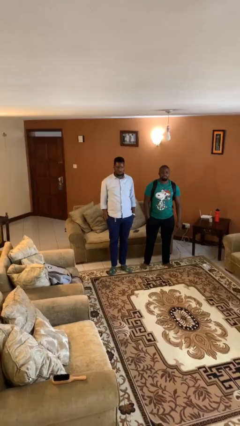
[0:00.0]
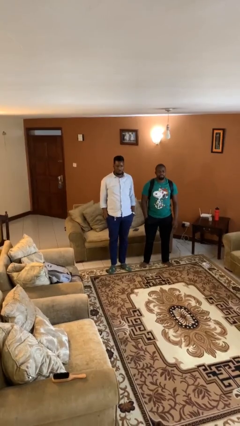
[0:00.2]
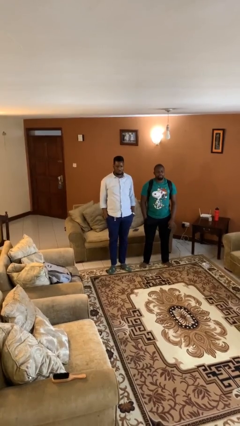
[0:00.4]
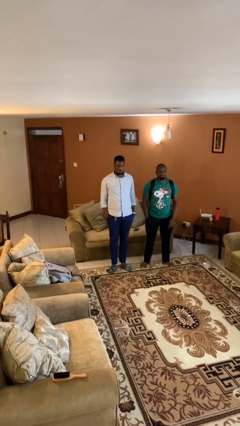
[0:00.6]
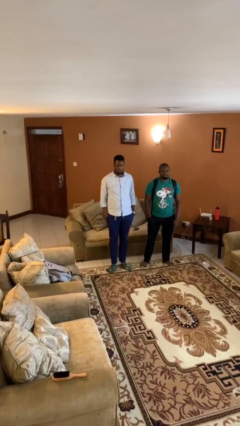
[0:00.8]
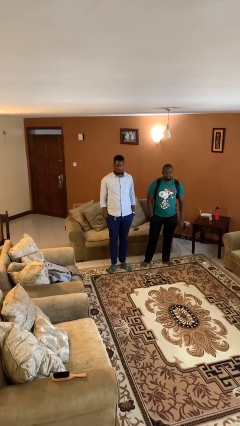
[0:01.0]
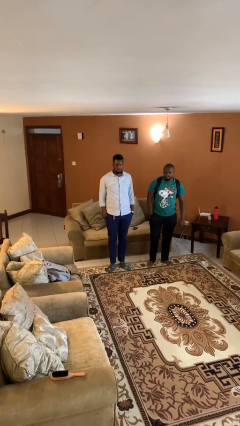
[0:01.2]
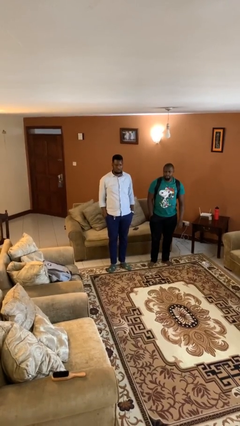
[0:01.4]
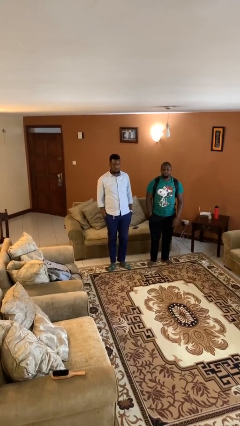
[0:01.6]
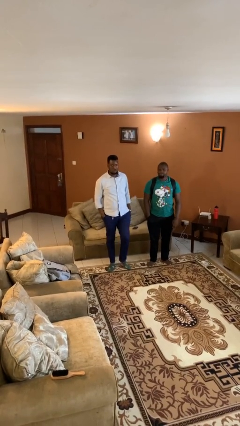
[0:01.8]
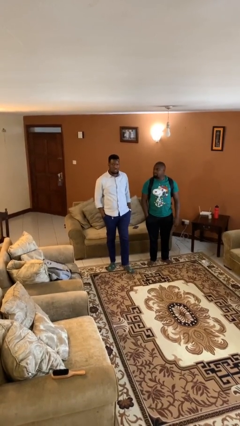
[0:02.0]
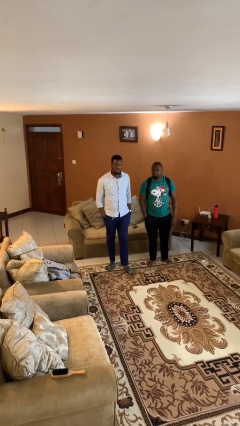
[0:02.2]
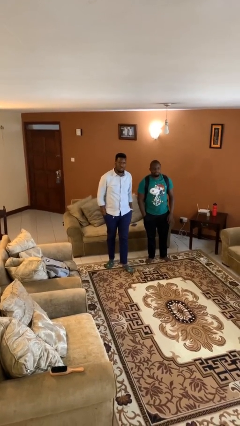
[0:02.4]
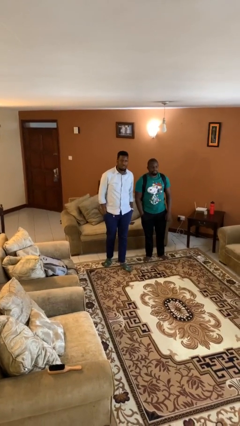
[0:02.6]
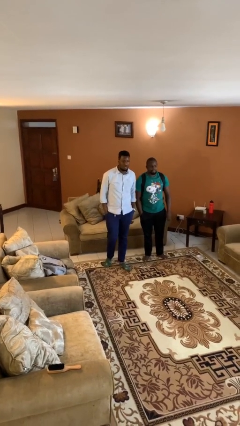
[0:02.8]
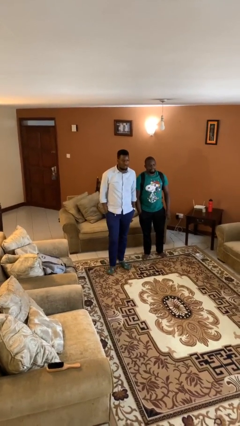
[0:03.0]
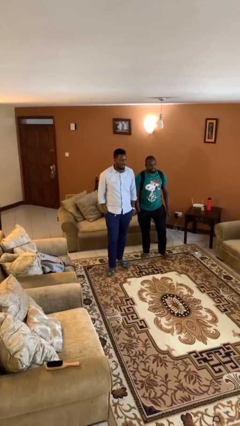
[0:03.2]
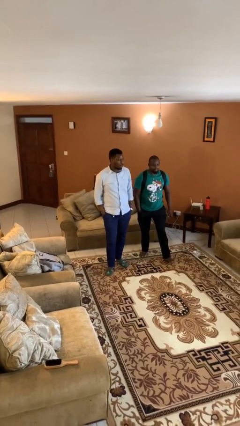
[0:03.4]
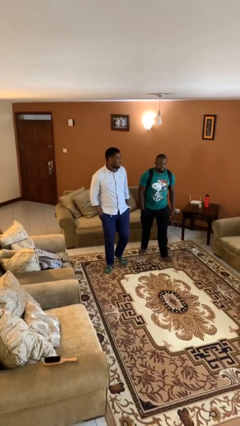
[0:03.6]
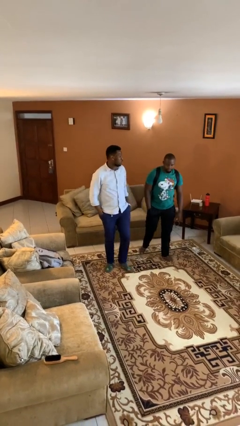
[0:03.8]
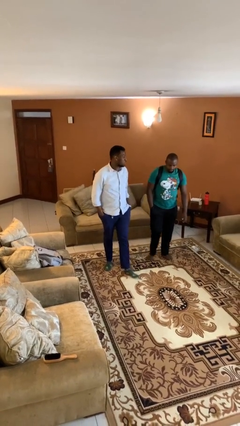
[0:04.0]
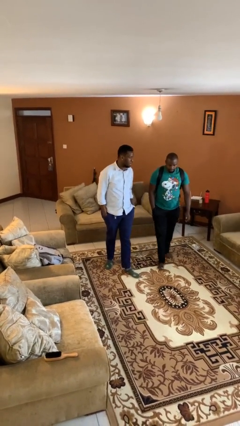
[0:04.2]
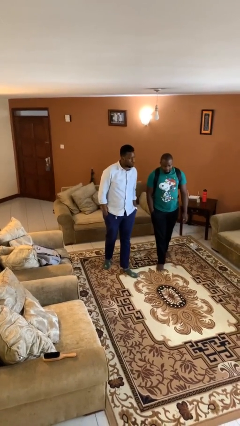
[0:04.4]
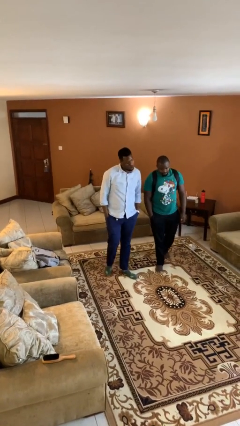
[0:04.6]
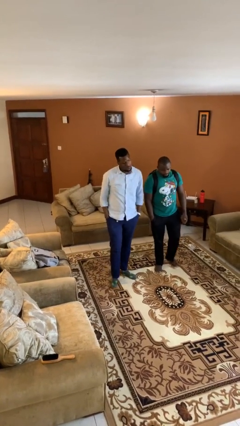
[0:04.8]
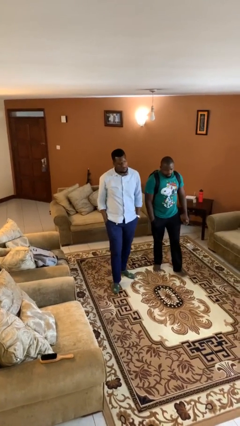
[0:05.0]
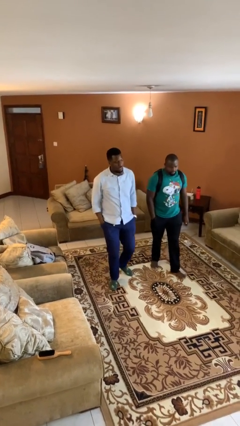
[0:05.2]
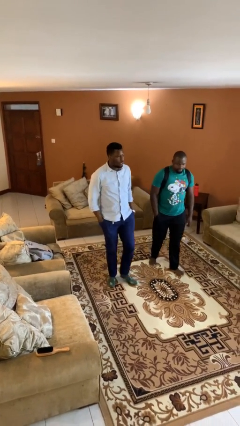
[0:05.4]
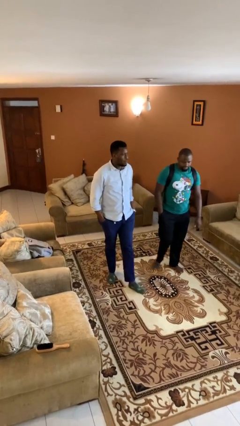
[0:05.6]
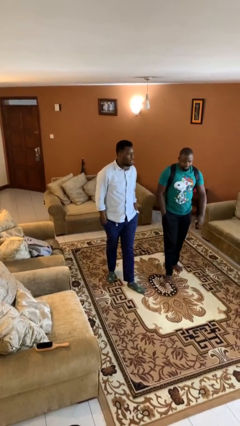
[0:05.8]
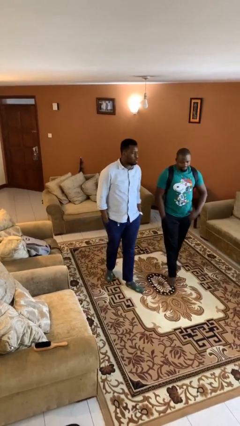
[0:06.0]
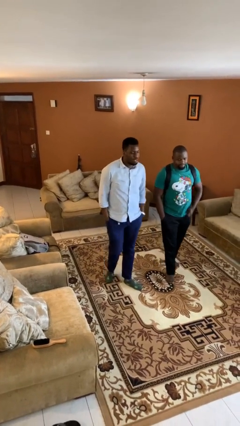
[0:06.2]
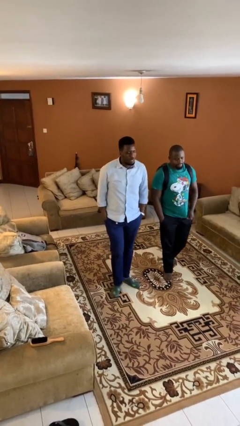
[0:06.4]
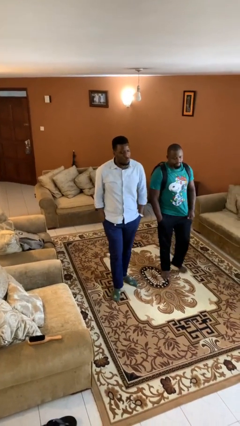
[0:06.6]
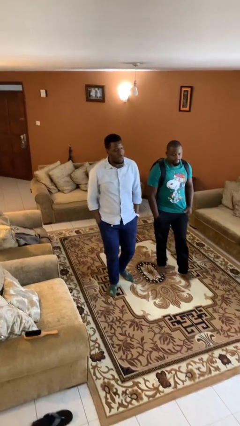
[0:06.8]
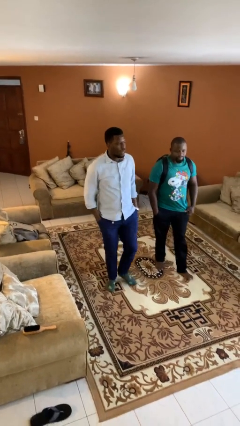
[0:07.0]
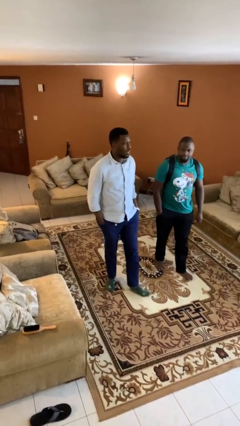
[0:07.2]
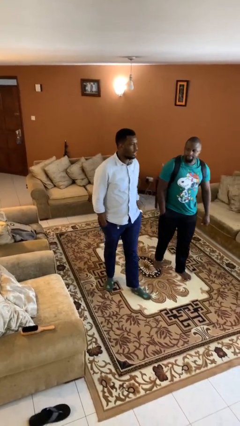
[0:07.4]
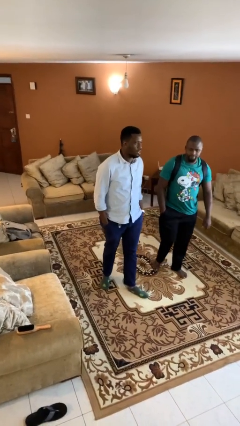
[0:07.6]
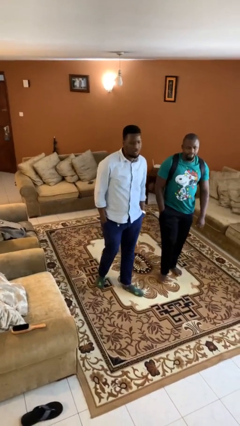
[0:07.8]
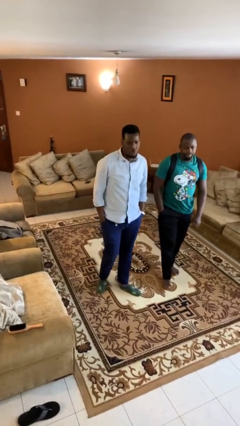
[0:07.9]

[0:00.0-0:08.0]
person talks to person

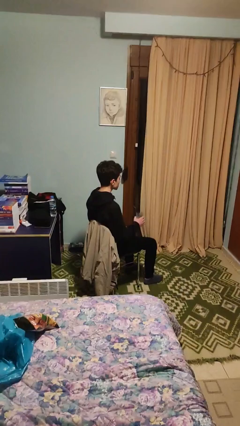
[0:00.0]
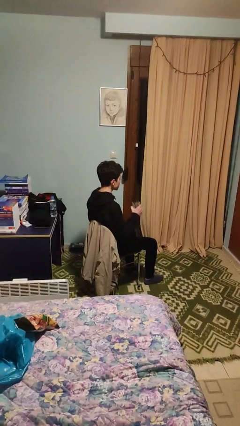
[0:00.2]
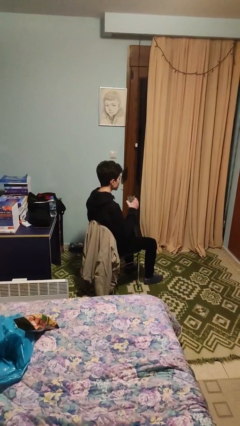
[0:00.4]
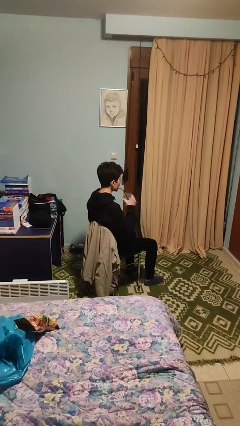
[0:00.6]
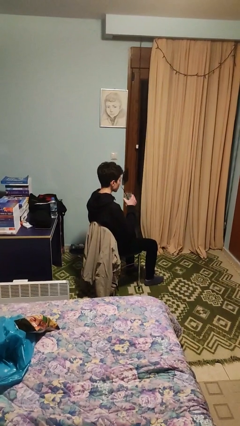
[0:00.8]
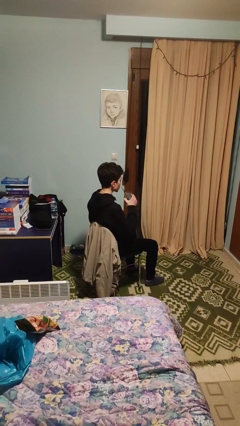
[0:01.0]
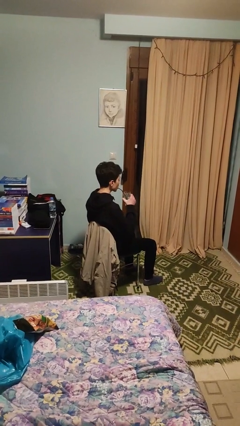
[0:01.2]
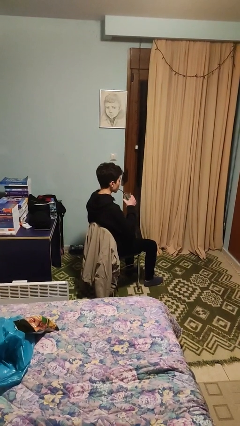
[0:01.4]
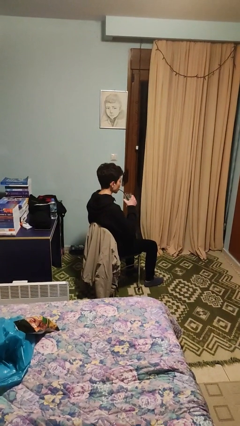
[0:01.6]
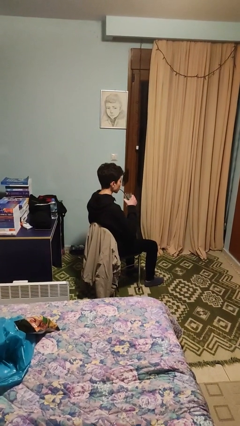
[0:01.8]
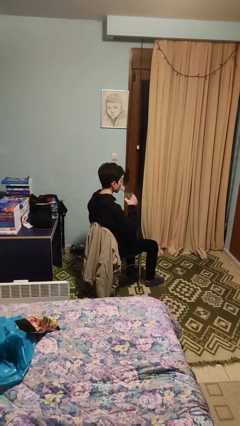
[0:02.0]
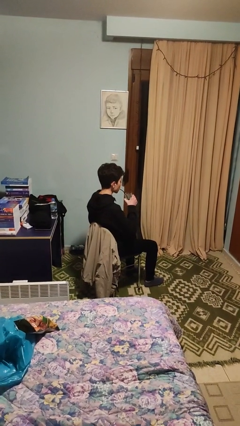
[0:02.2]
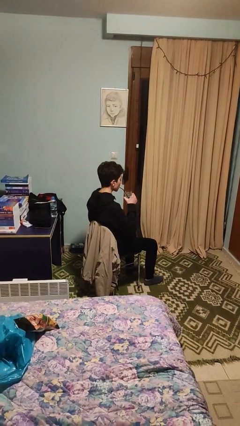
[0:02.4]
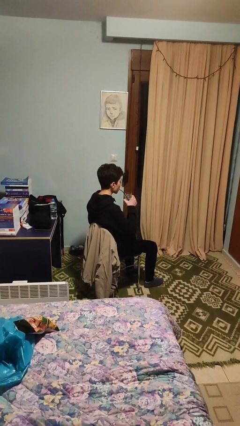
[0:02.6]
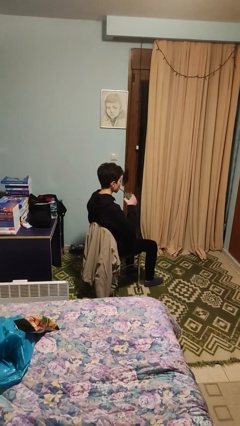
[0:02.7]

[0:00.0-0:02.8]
person drinks from straw

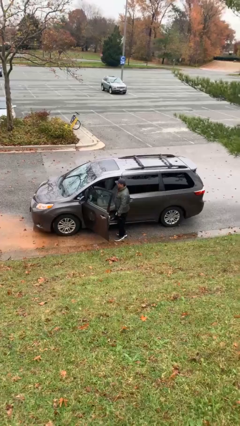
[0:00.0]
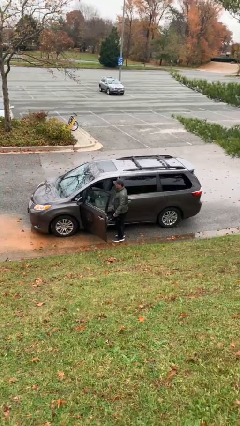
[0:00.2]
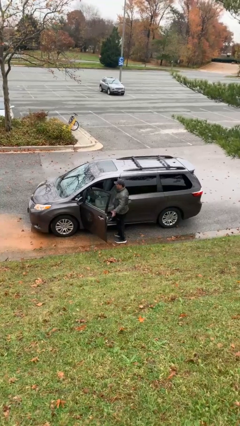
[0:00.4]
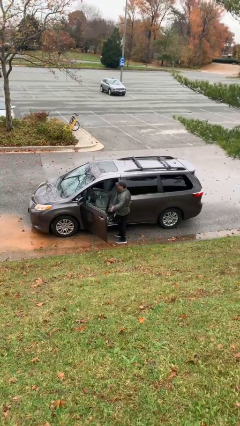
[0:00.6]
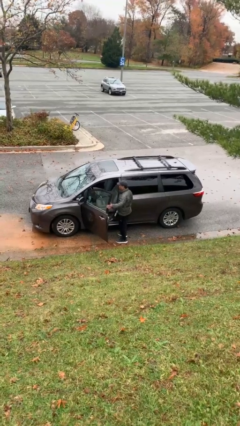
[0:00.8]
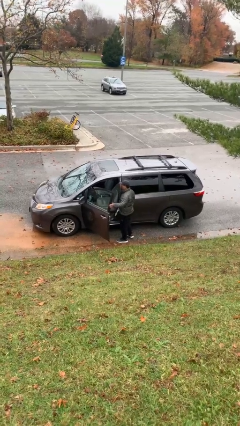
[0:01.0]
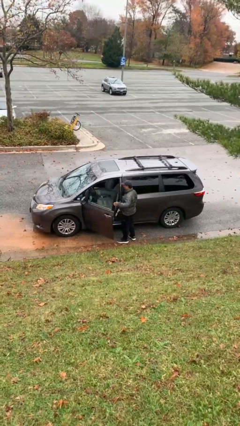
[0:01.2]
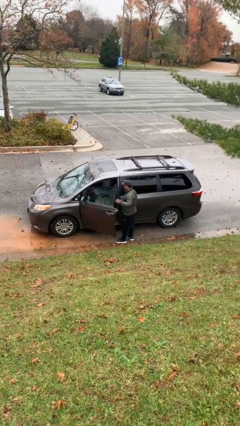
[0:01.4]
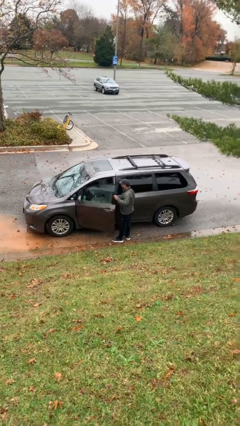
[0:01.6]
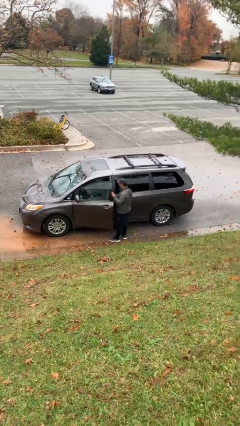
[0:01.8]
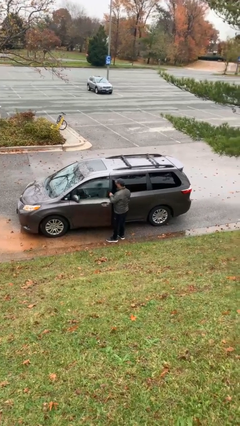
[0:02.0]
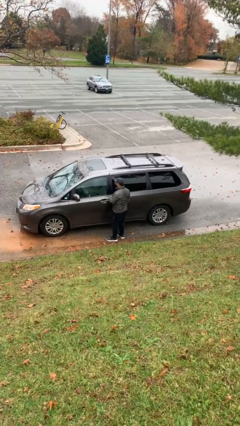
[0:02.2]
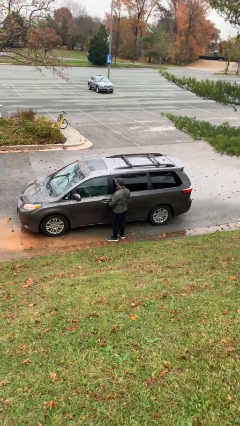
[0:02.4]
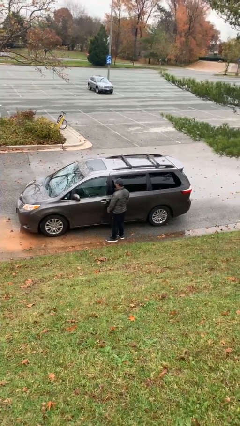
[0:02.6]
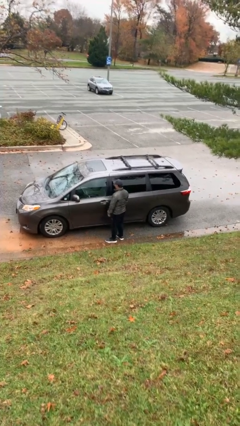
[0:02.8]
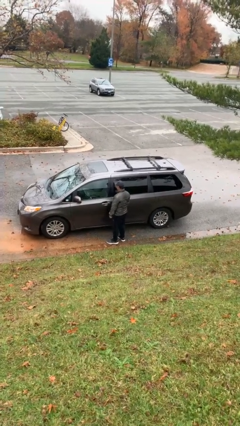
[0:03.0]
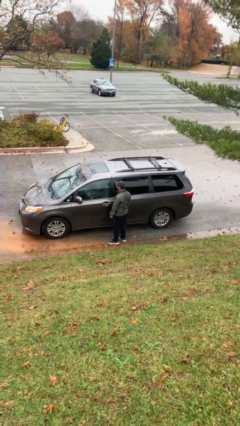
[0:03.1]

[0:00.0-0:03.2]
person closes car door

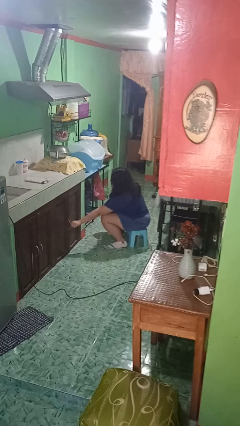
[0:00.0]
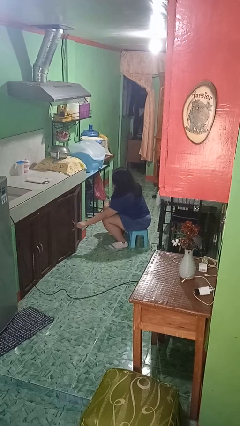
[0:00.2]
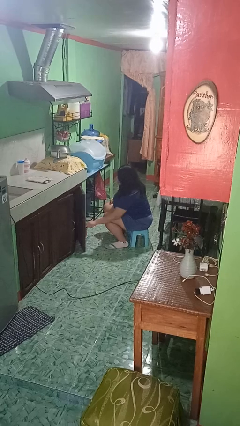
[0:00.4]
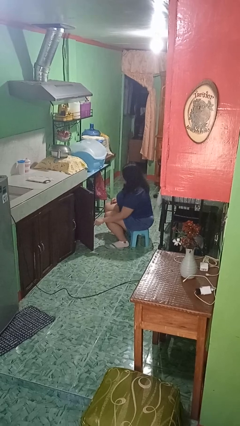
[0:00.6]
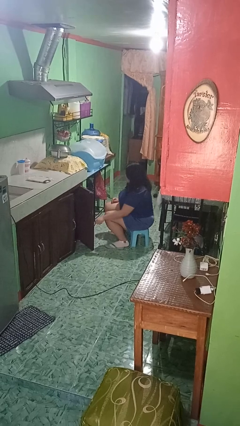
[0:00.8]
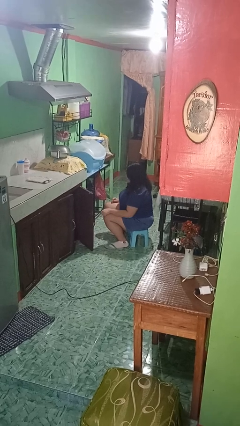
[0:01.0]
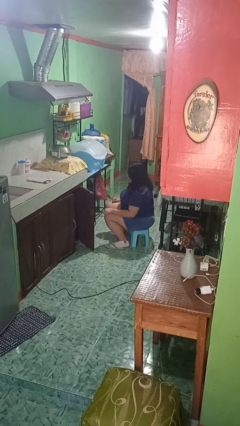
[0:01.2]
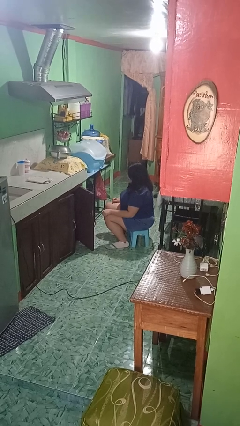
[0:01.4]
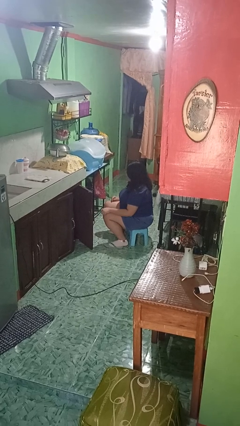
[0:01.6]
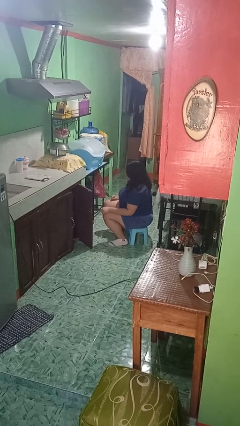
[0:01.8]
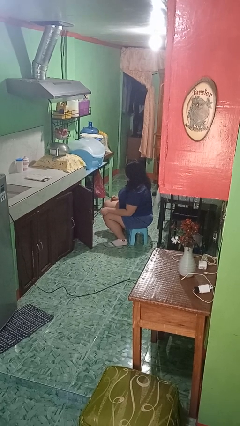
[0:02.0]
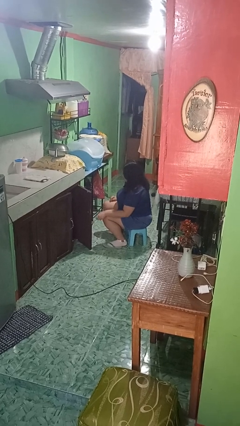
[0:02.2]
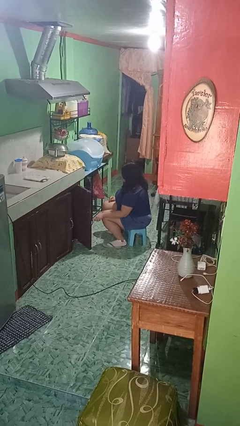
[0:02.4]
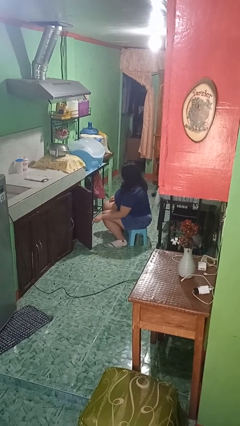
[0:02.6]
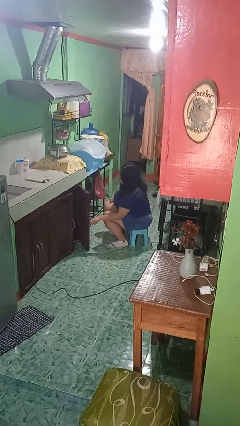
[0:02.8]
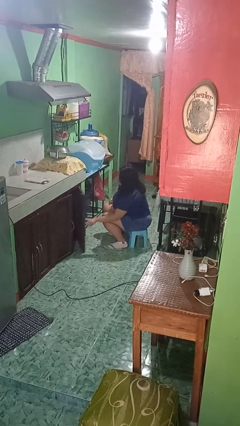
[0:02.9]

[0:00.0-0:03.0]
person opens cabinet

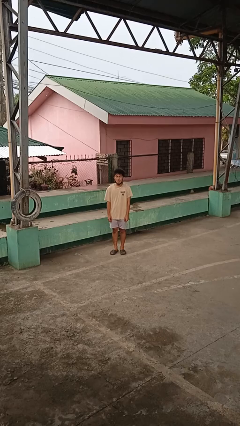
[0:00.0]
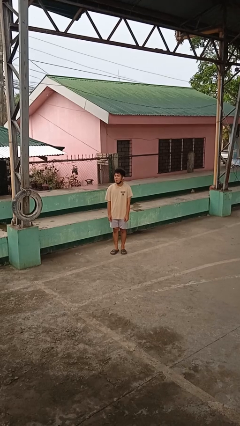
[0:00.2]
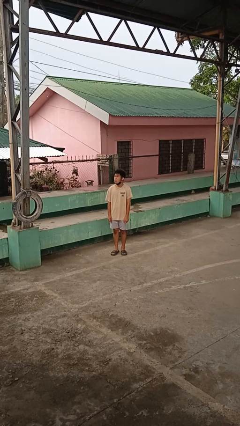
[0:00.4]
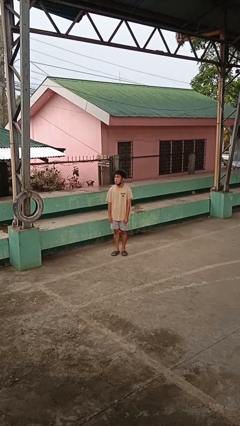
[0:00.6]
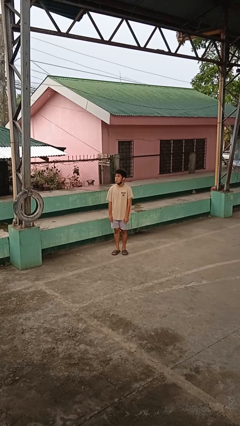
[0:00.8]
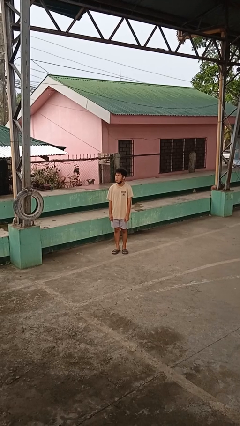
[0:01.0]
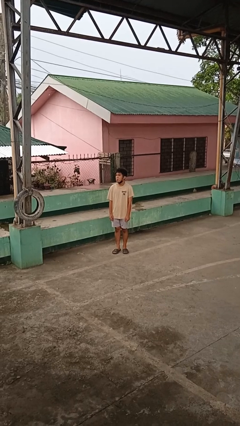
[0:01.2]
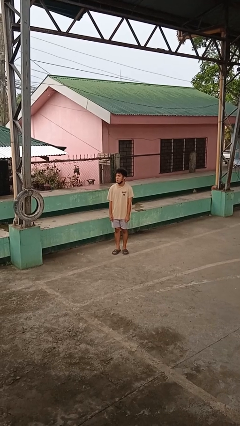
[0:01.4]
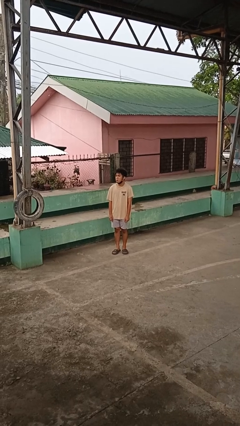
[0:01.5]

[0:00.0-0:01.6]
person sticks out tongue
